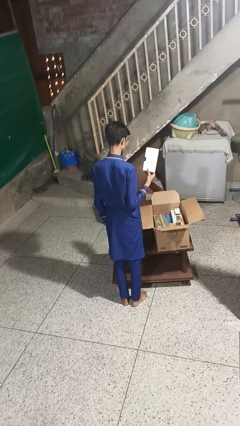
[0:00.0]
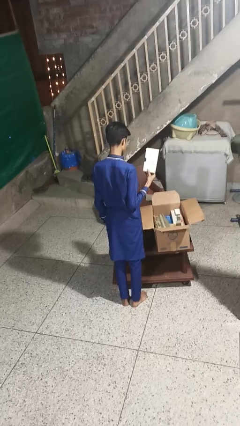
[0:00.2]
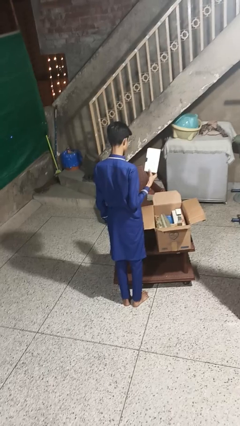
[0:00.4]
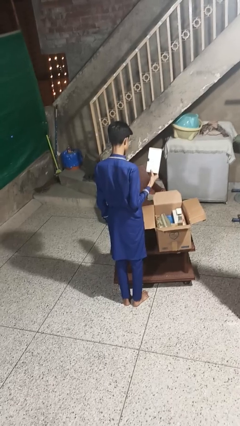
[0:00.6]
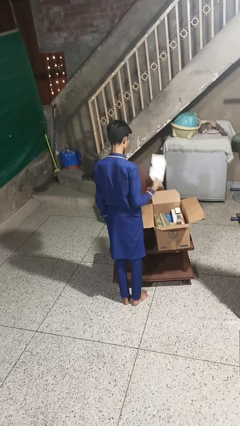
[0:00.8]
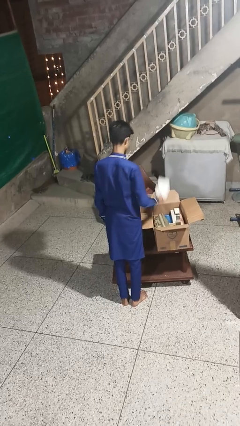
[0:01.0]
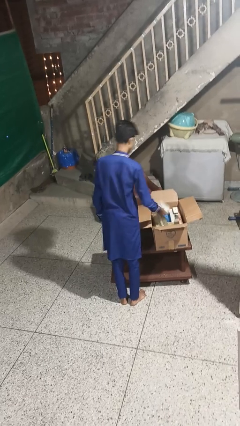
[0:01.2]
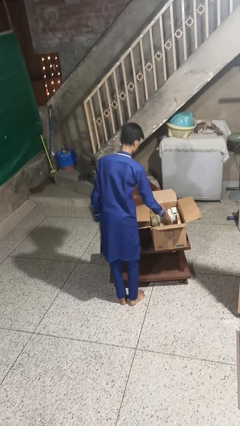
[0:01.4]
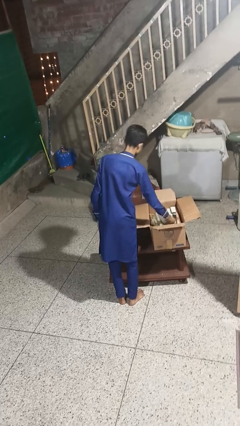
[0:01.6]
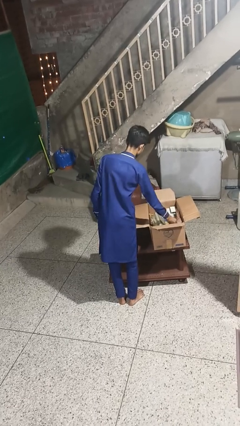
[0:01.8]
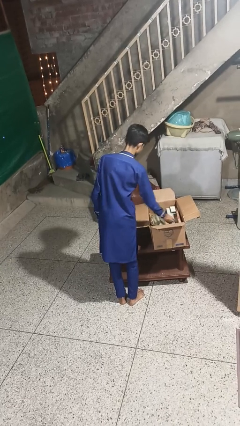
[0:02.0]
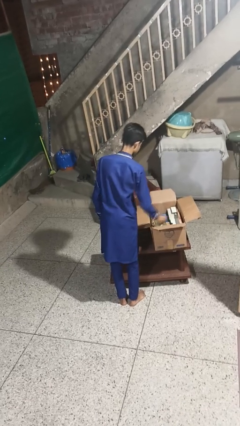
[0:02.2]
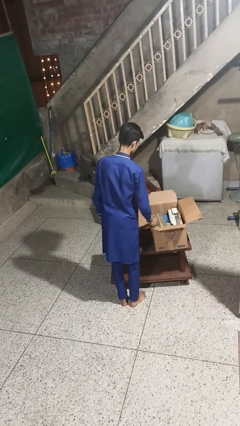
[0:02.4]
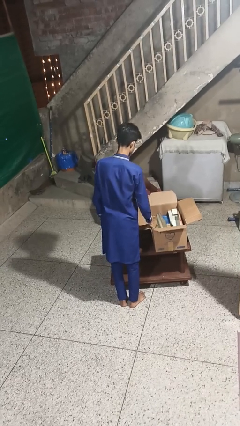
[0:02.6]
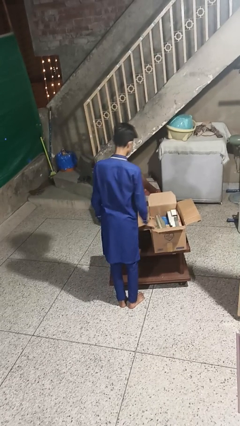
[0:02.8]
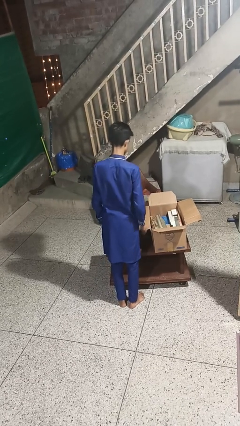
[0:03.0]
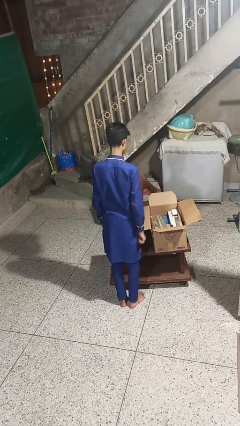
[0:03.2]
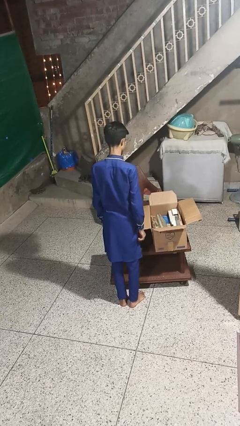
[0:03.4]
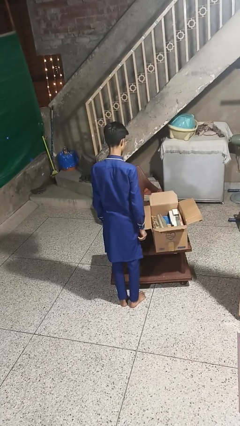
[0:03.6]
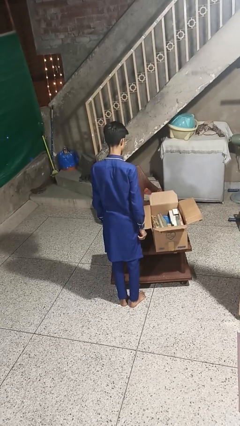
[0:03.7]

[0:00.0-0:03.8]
person puts object into box

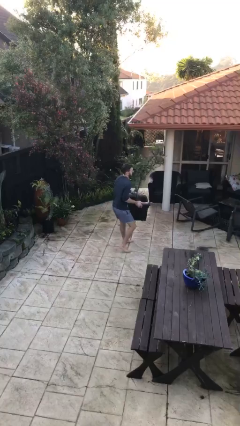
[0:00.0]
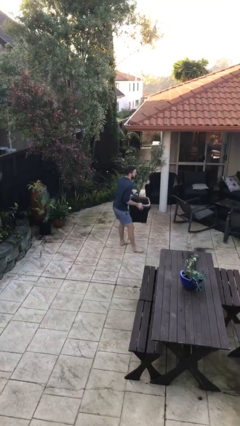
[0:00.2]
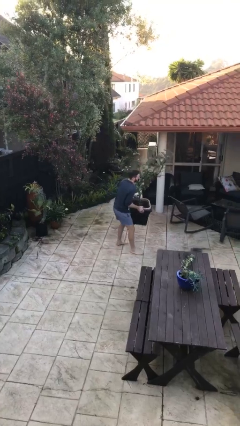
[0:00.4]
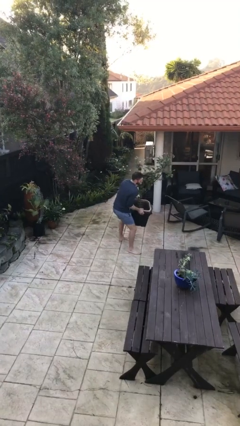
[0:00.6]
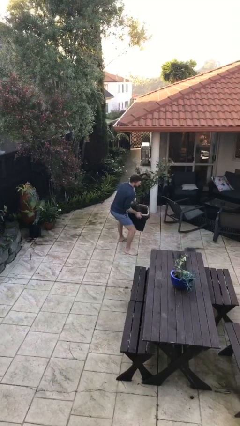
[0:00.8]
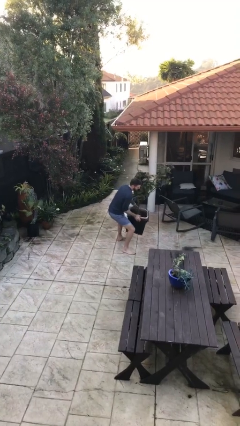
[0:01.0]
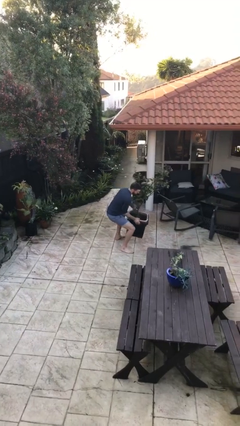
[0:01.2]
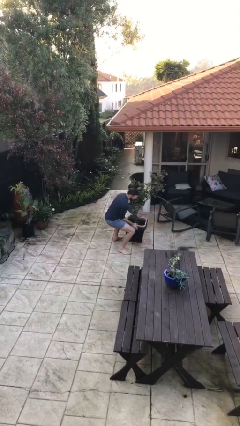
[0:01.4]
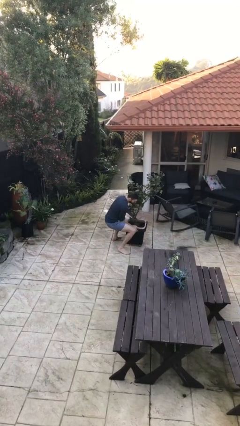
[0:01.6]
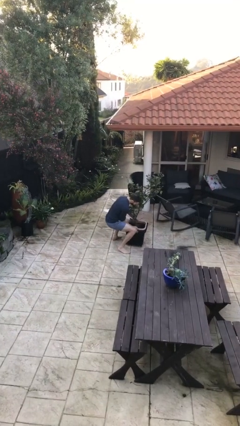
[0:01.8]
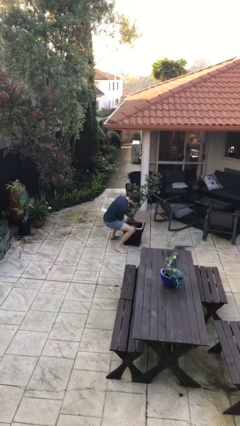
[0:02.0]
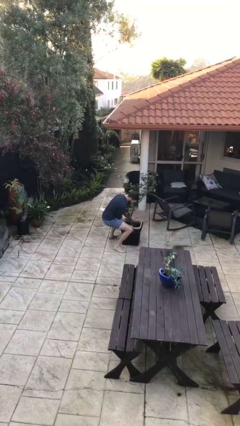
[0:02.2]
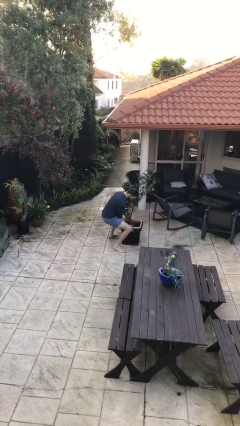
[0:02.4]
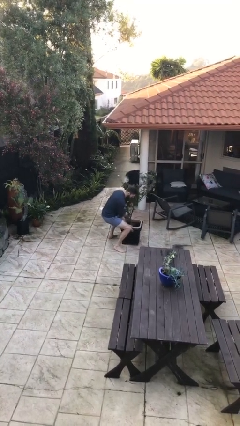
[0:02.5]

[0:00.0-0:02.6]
person puts down object on floor

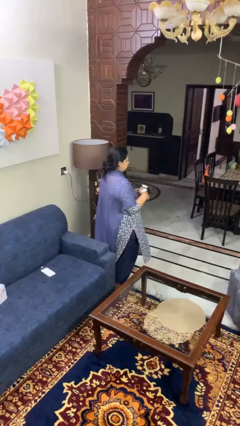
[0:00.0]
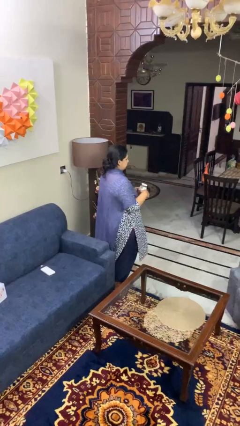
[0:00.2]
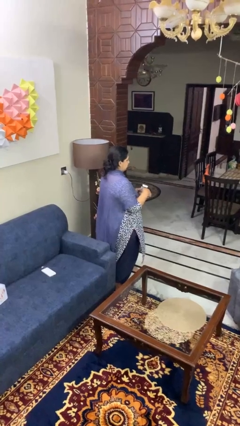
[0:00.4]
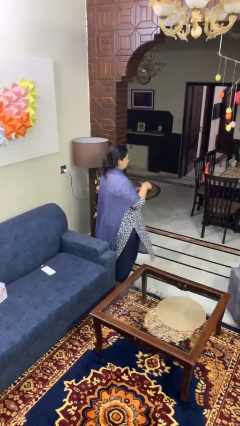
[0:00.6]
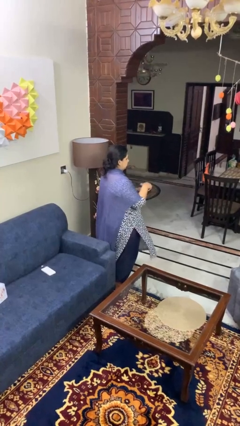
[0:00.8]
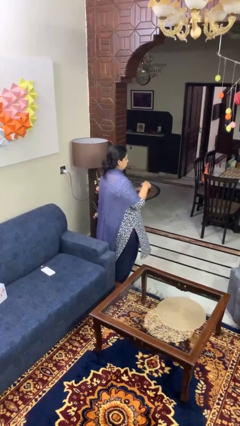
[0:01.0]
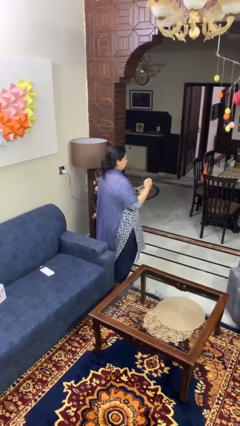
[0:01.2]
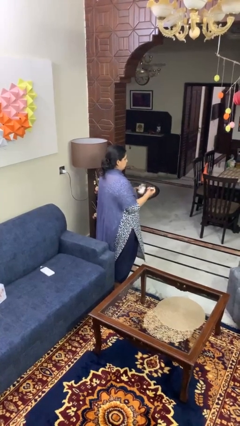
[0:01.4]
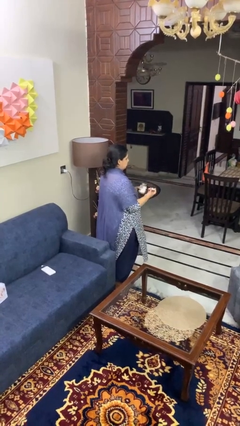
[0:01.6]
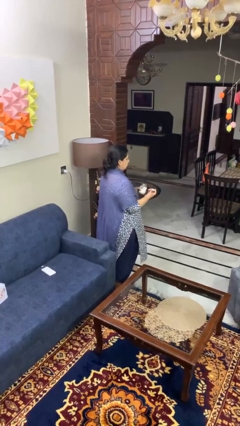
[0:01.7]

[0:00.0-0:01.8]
person opens jar

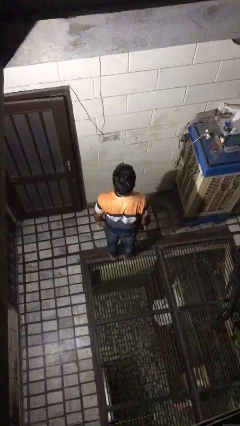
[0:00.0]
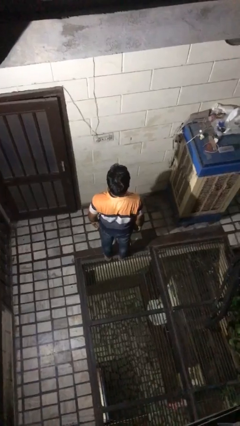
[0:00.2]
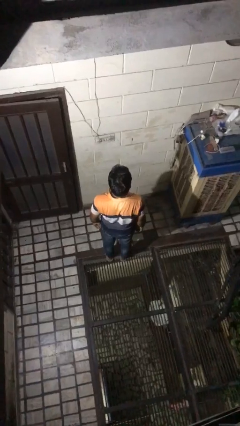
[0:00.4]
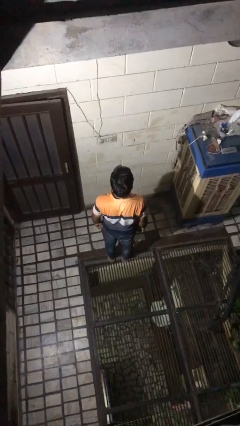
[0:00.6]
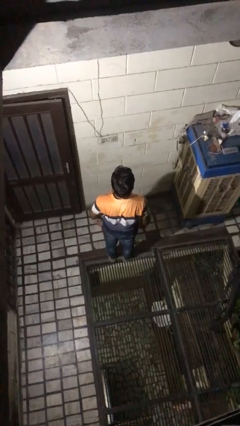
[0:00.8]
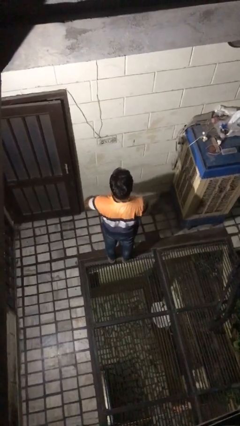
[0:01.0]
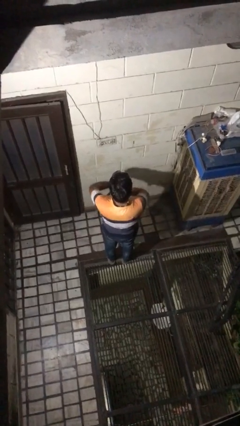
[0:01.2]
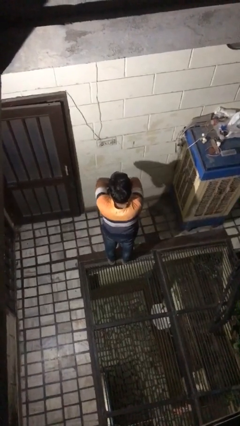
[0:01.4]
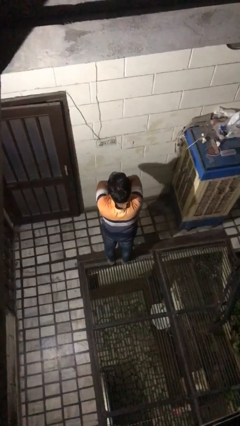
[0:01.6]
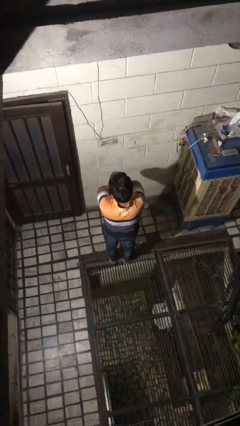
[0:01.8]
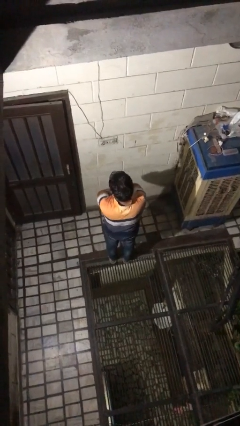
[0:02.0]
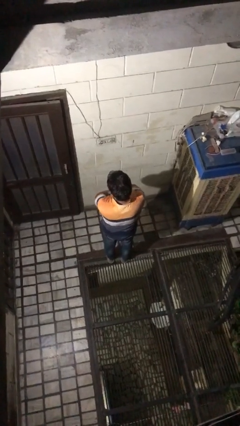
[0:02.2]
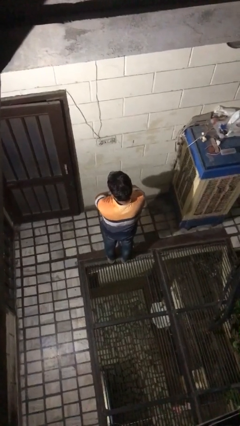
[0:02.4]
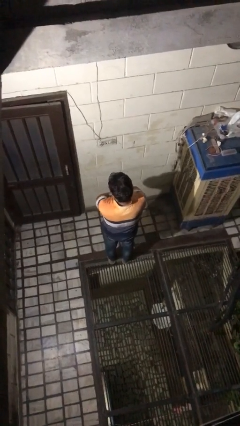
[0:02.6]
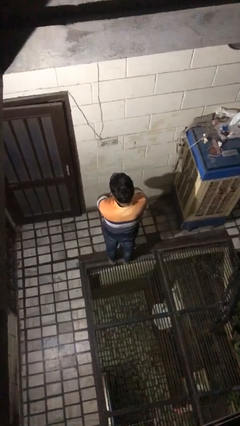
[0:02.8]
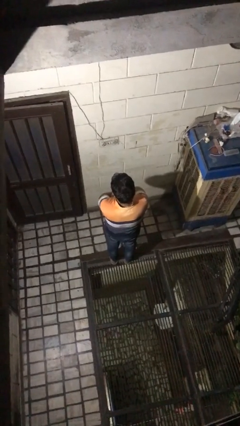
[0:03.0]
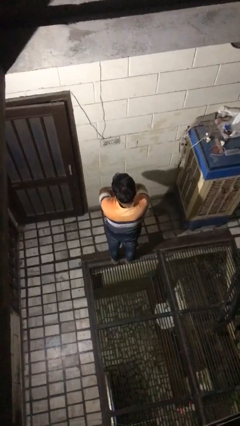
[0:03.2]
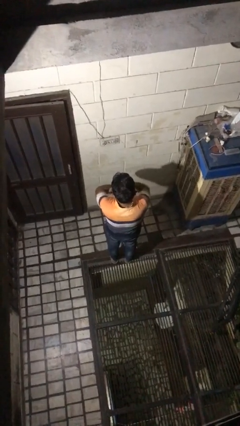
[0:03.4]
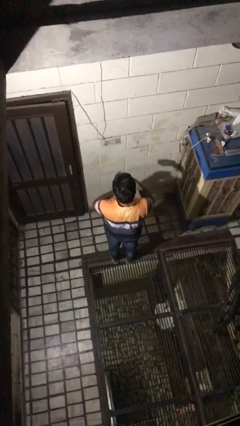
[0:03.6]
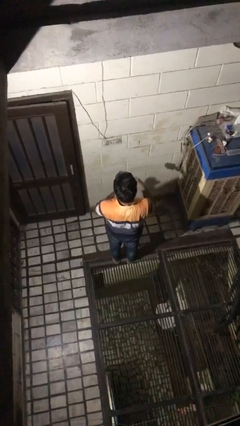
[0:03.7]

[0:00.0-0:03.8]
person crosses arms

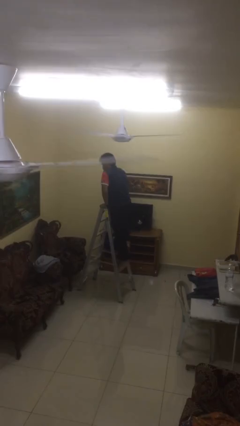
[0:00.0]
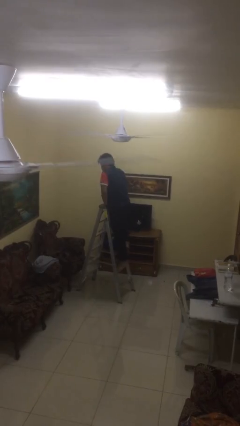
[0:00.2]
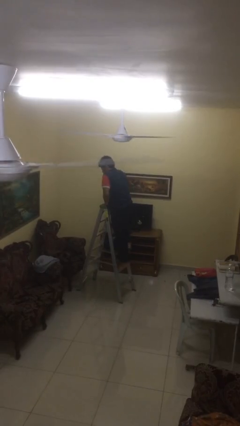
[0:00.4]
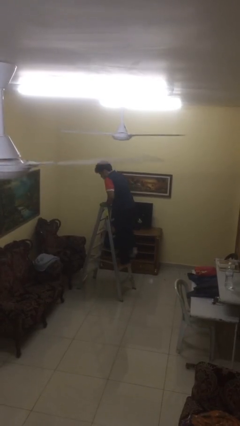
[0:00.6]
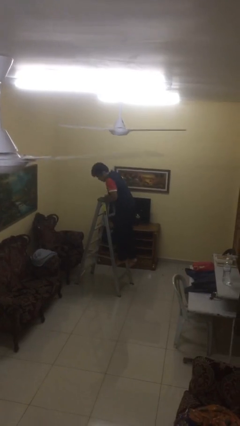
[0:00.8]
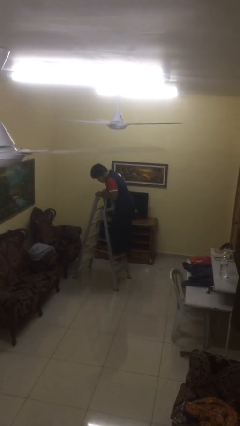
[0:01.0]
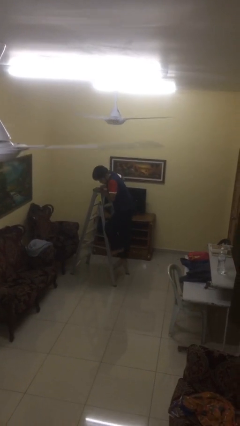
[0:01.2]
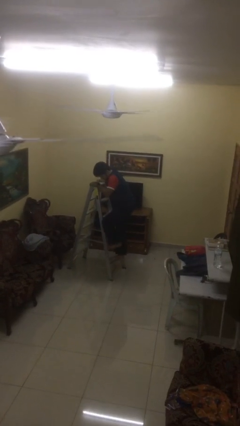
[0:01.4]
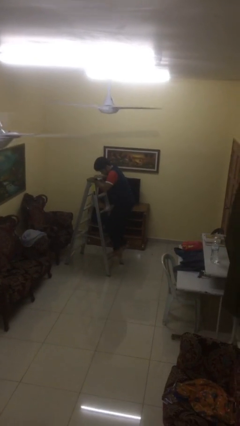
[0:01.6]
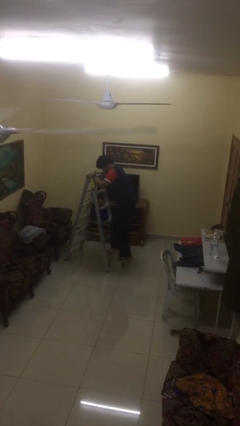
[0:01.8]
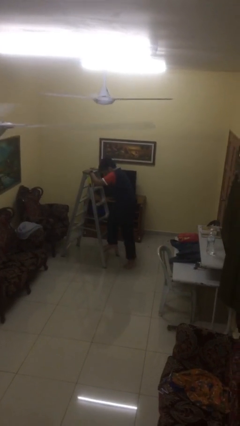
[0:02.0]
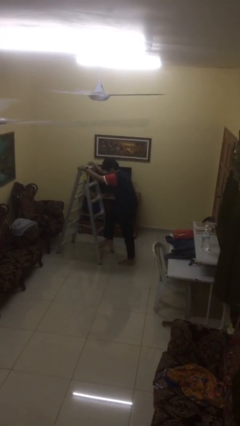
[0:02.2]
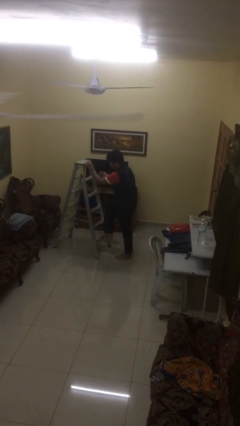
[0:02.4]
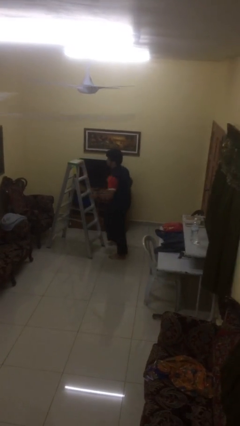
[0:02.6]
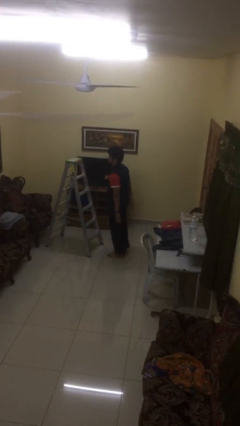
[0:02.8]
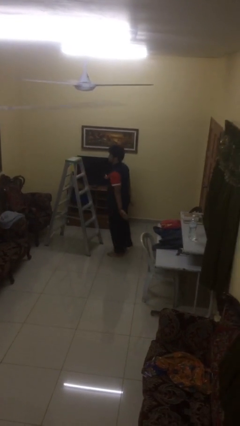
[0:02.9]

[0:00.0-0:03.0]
person climbs down ladder

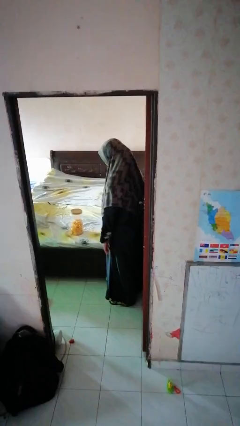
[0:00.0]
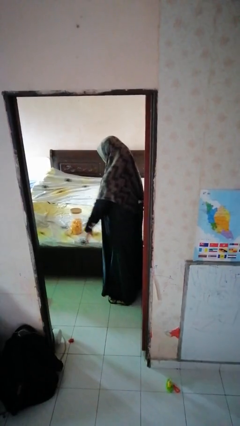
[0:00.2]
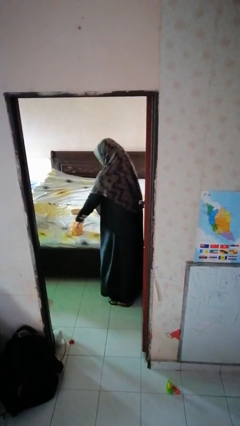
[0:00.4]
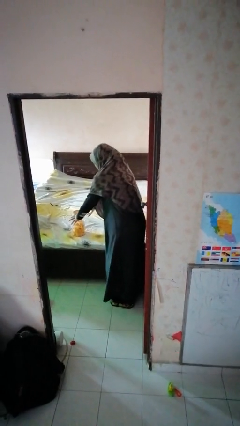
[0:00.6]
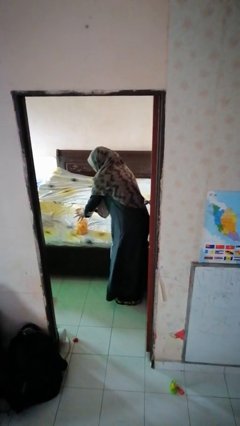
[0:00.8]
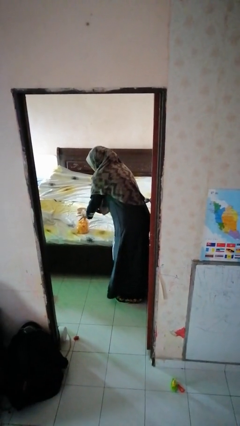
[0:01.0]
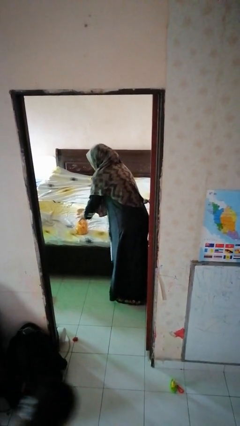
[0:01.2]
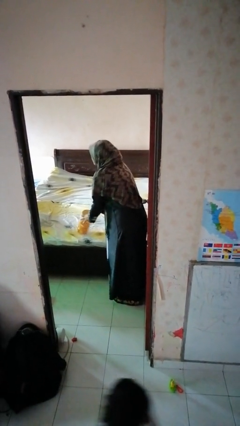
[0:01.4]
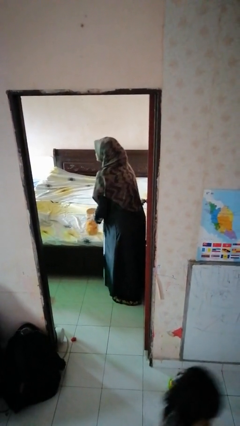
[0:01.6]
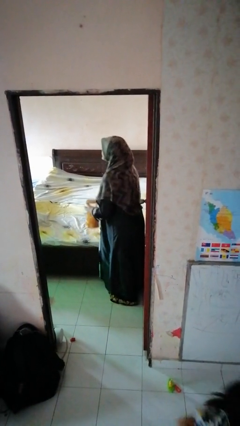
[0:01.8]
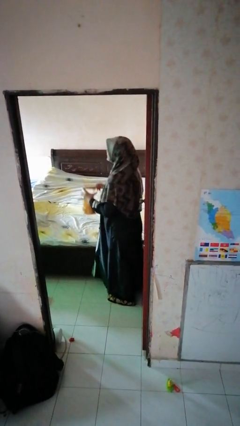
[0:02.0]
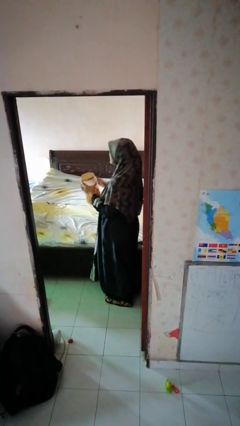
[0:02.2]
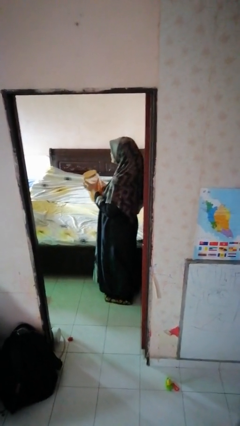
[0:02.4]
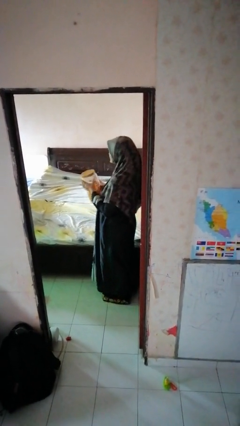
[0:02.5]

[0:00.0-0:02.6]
person picks up object from bed
